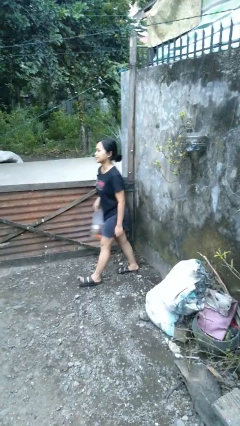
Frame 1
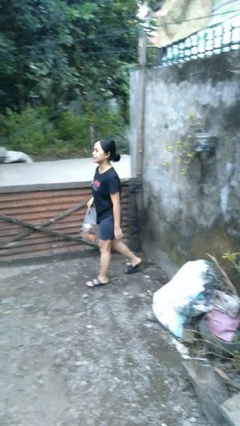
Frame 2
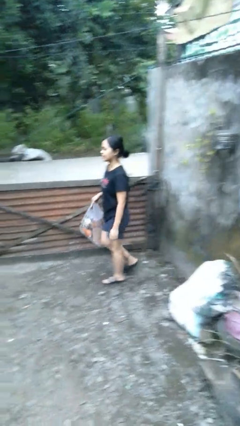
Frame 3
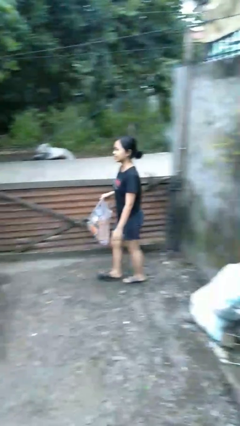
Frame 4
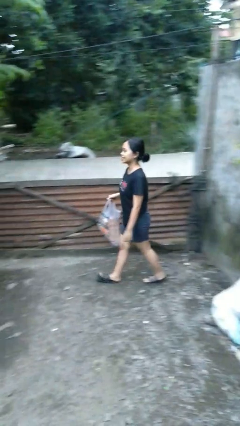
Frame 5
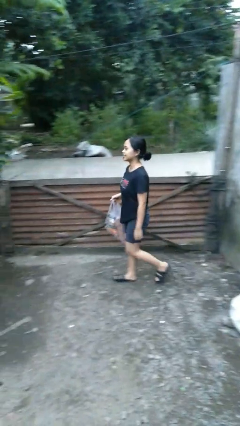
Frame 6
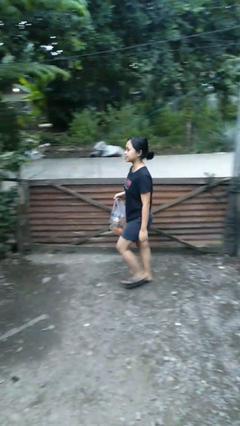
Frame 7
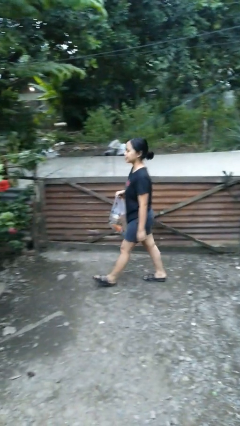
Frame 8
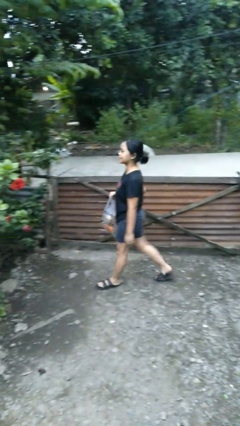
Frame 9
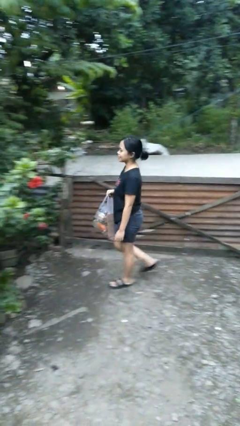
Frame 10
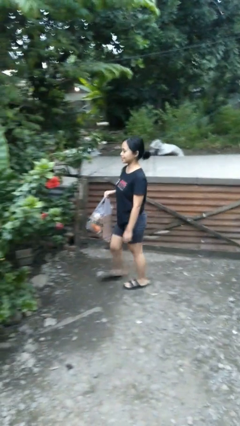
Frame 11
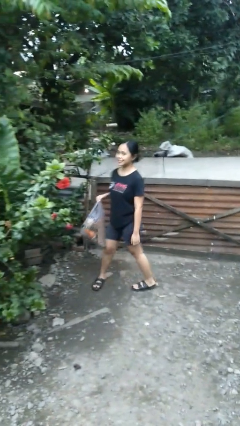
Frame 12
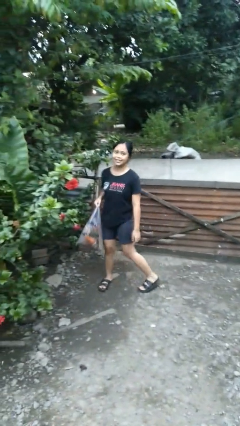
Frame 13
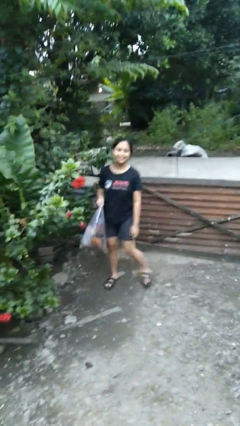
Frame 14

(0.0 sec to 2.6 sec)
person carries groceries

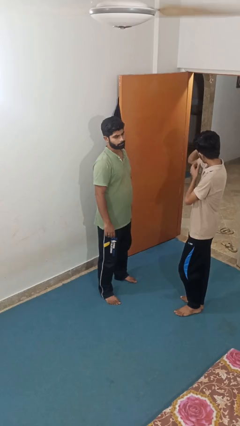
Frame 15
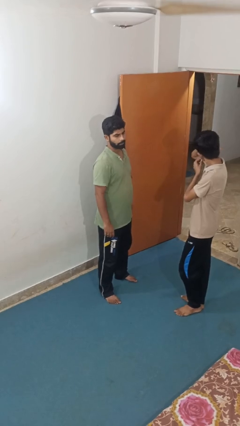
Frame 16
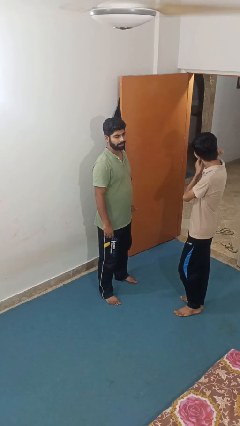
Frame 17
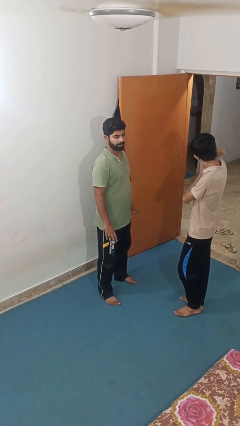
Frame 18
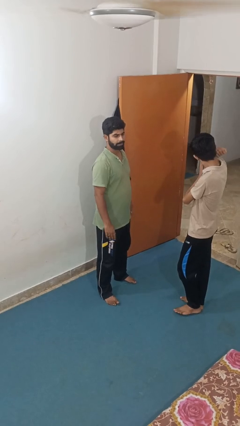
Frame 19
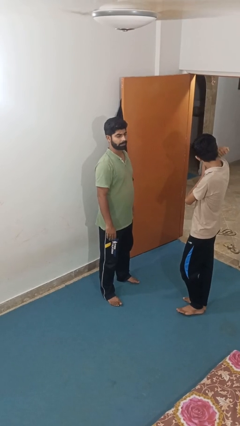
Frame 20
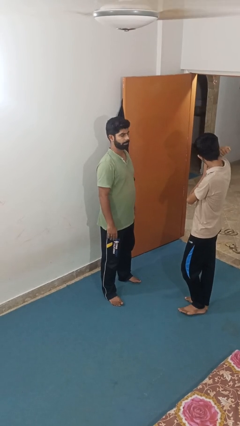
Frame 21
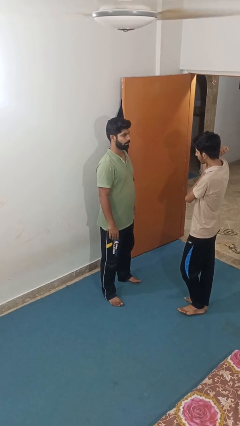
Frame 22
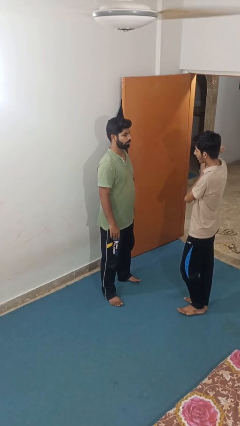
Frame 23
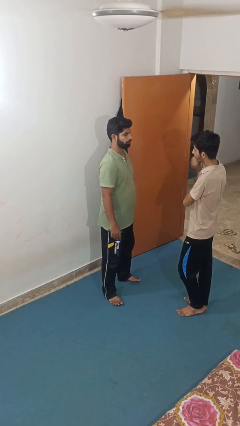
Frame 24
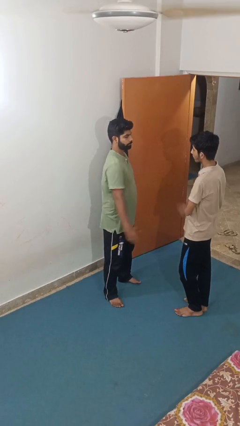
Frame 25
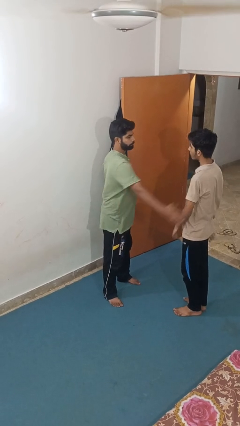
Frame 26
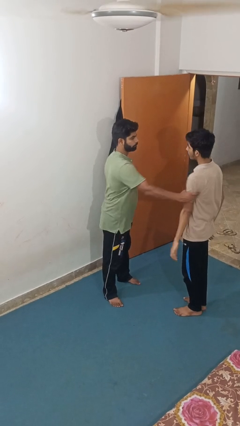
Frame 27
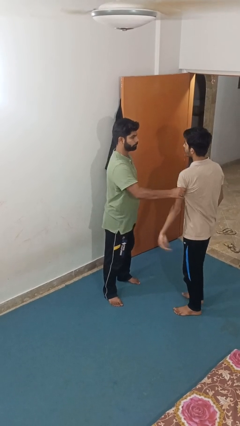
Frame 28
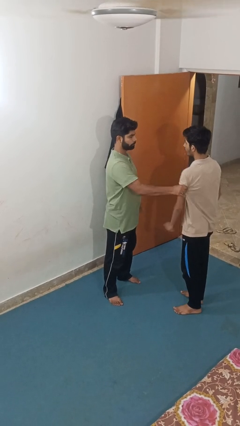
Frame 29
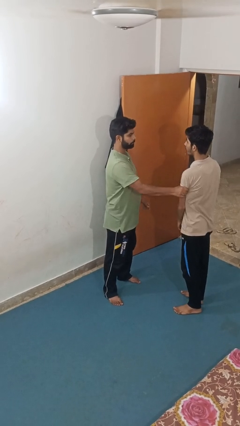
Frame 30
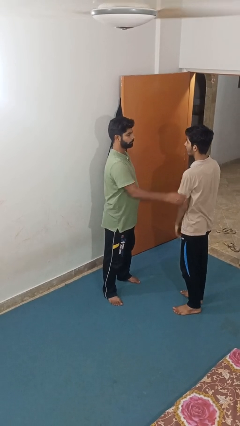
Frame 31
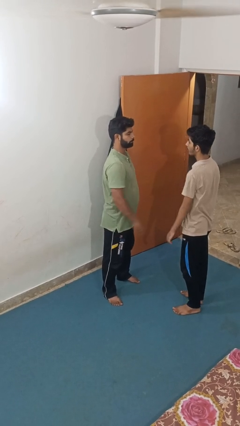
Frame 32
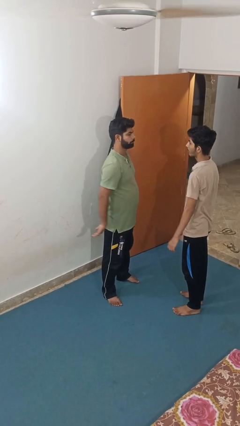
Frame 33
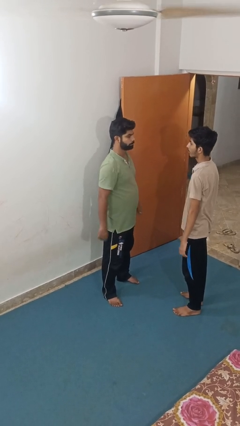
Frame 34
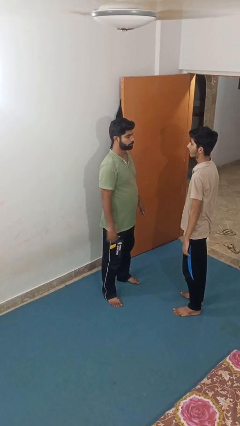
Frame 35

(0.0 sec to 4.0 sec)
person grabs person by bicep

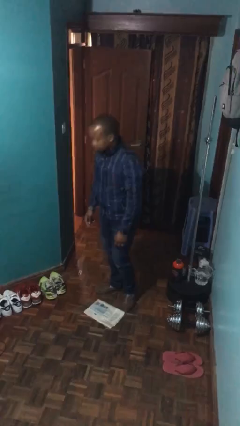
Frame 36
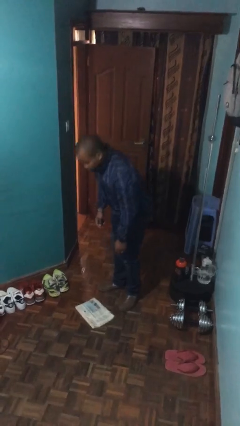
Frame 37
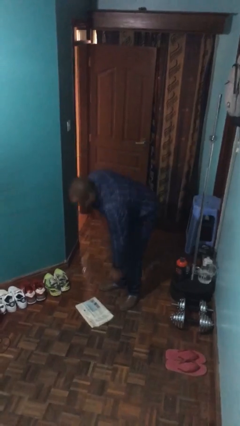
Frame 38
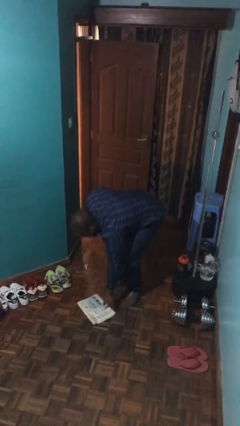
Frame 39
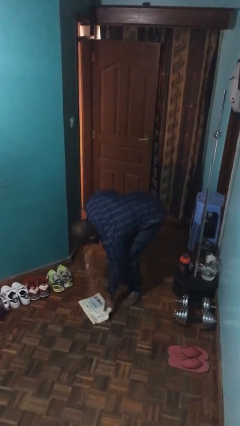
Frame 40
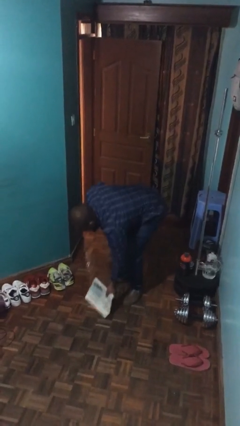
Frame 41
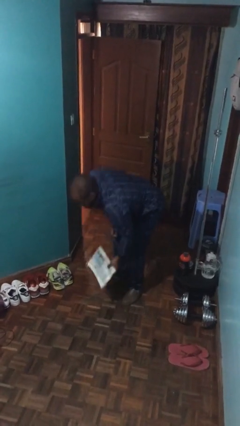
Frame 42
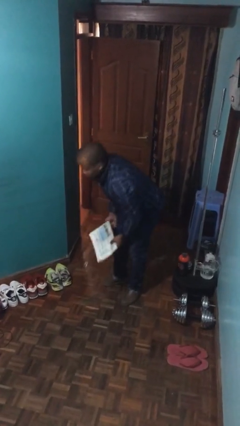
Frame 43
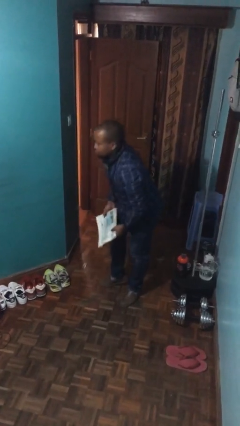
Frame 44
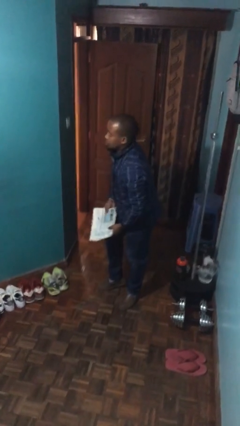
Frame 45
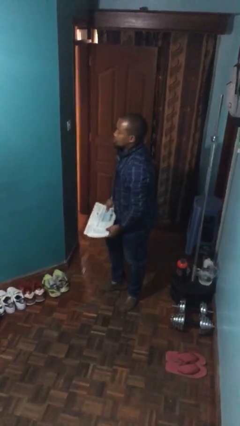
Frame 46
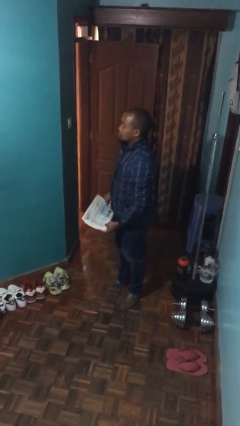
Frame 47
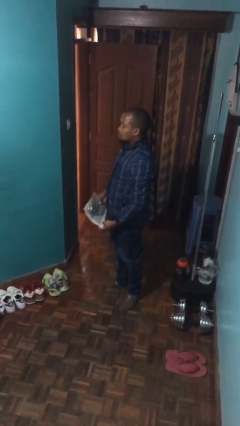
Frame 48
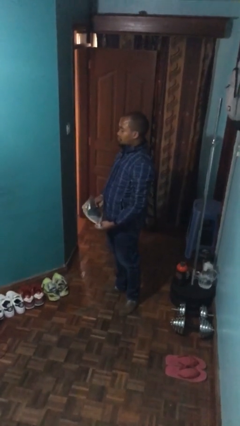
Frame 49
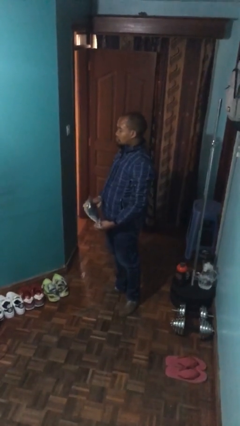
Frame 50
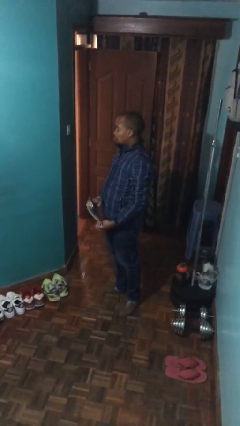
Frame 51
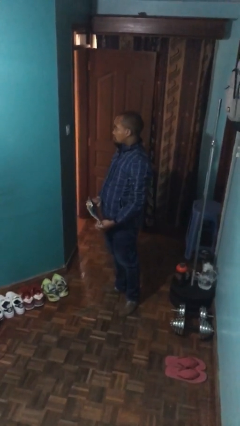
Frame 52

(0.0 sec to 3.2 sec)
person picks up object from floor

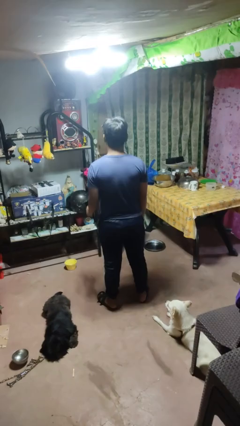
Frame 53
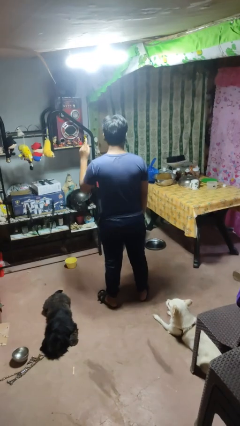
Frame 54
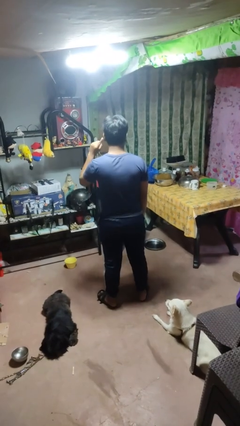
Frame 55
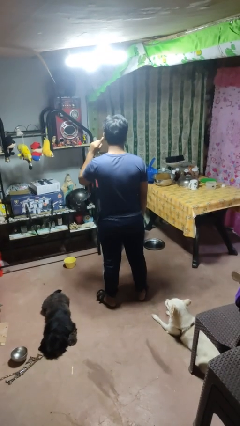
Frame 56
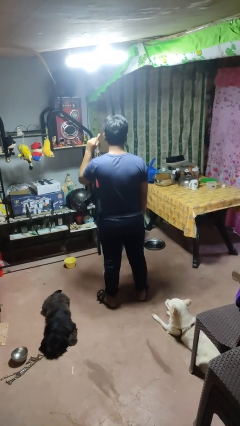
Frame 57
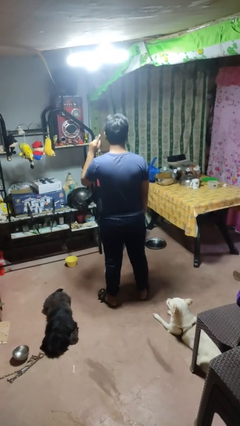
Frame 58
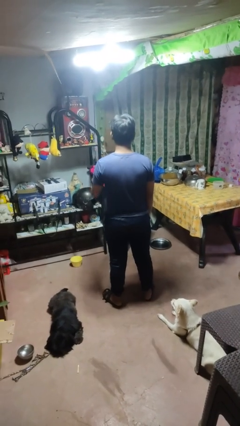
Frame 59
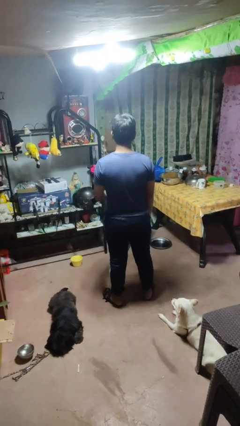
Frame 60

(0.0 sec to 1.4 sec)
person gestures listen closely

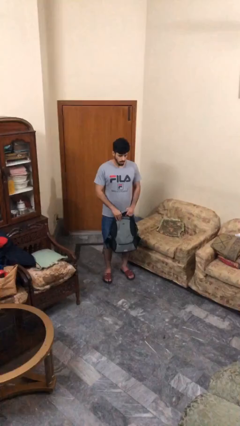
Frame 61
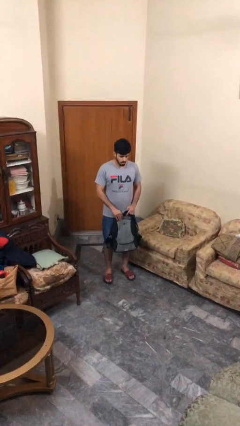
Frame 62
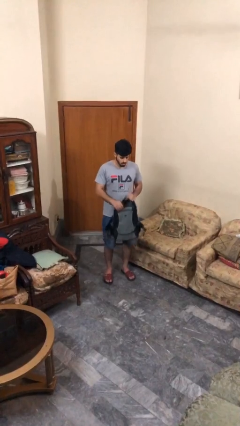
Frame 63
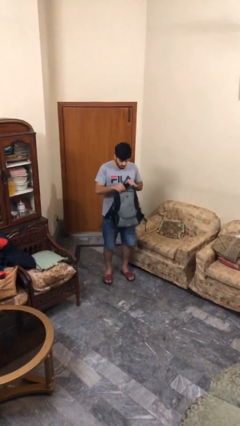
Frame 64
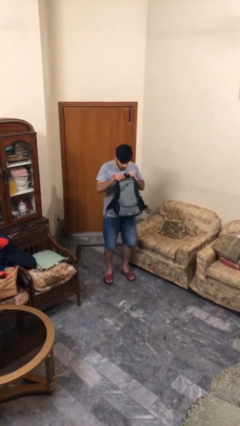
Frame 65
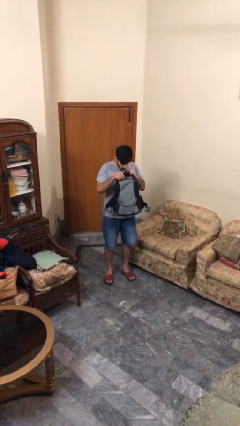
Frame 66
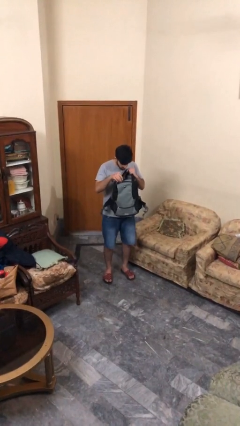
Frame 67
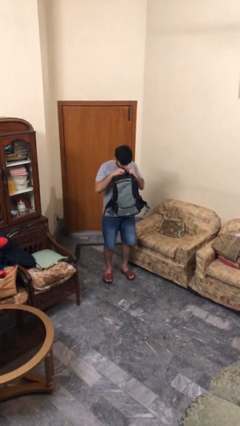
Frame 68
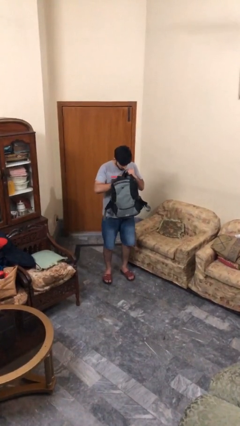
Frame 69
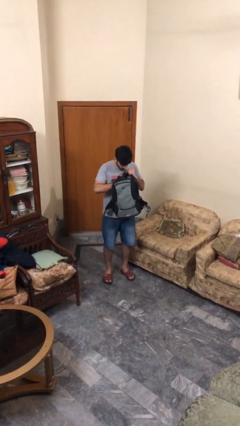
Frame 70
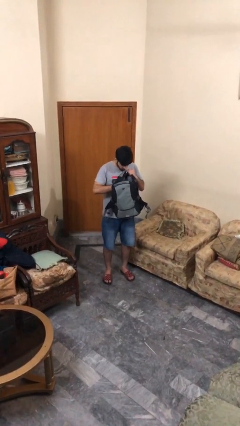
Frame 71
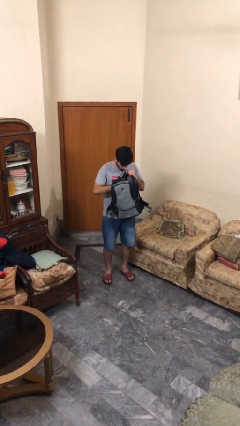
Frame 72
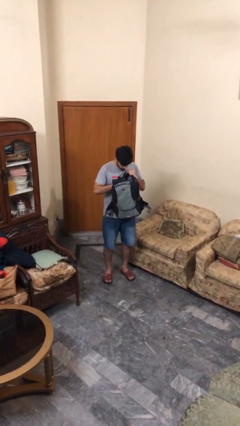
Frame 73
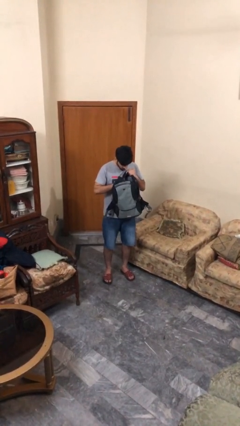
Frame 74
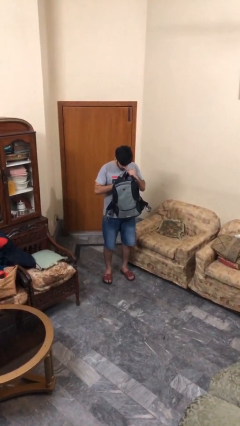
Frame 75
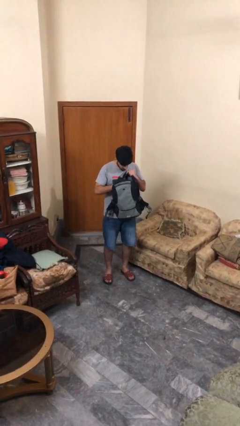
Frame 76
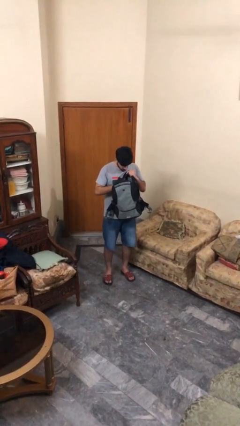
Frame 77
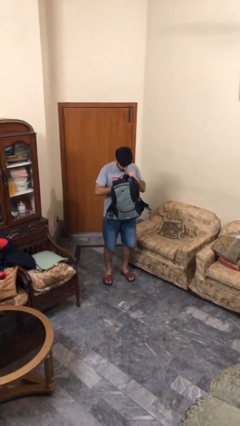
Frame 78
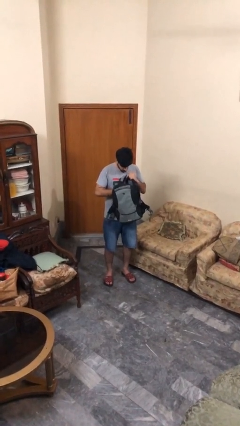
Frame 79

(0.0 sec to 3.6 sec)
person searches in backpack

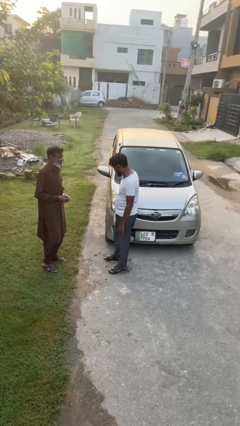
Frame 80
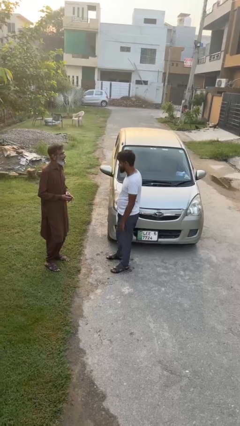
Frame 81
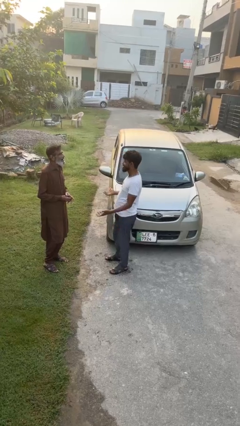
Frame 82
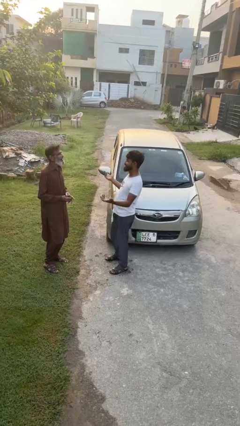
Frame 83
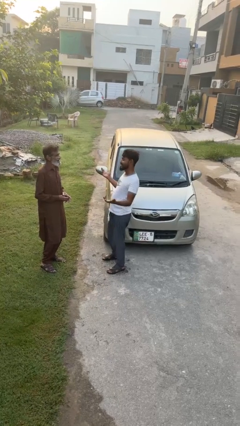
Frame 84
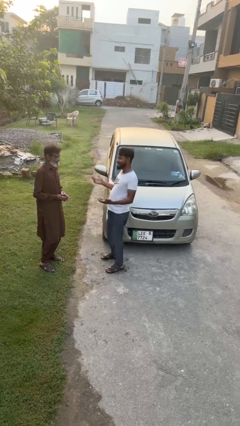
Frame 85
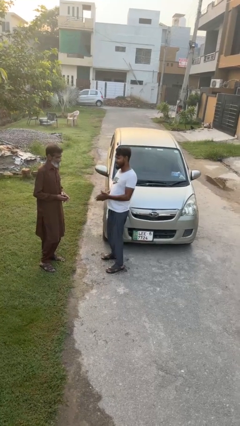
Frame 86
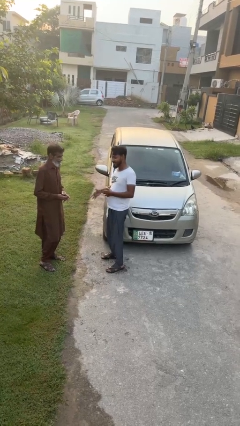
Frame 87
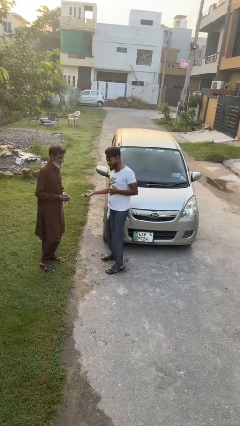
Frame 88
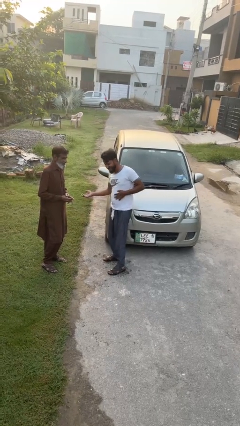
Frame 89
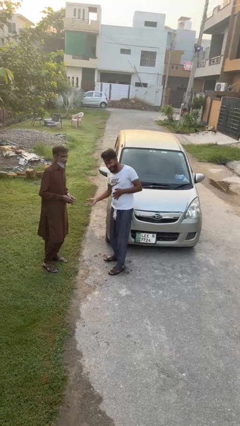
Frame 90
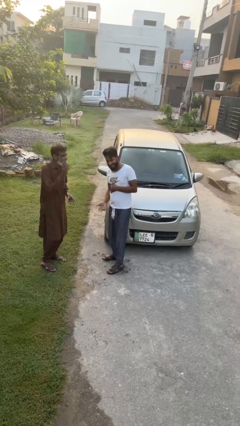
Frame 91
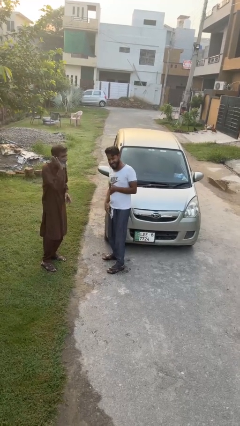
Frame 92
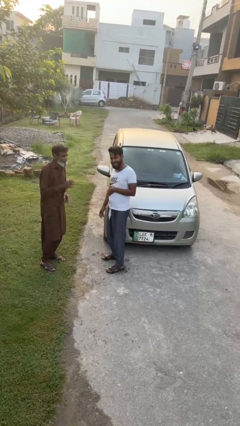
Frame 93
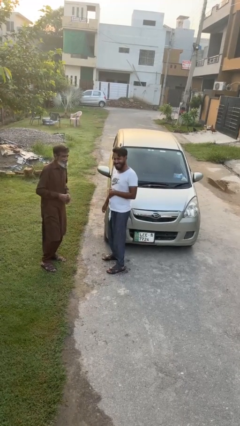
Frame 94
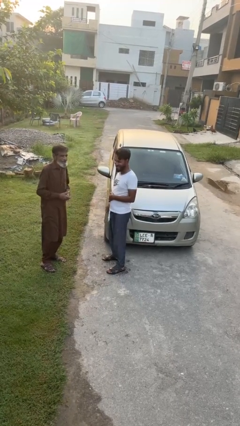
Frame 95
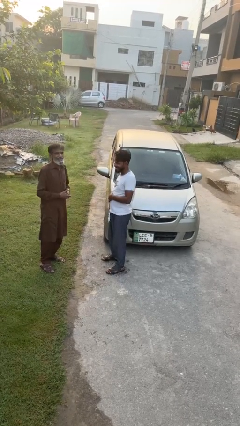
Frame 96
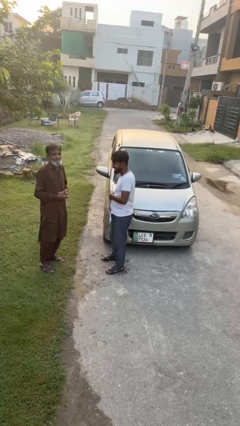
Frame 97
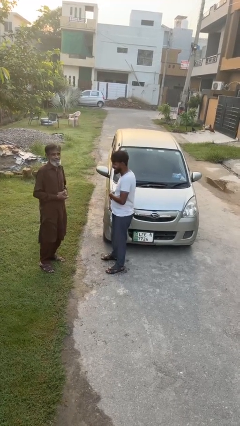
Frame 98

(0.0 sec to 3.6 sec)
person laughs with person
